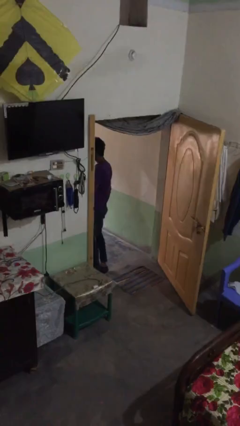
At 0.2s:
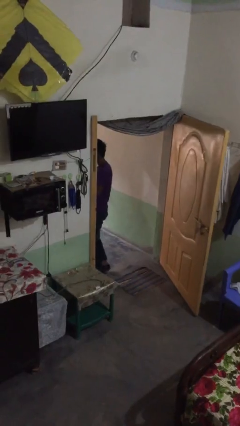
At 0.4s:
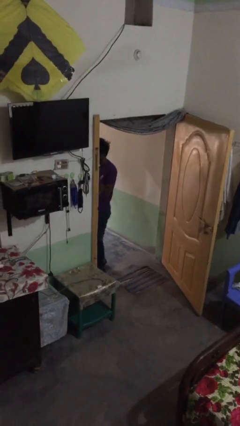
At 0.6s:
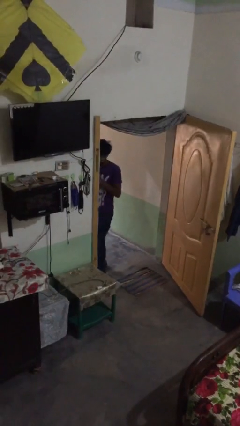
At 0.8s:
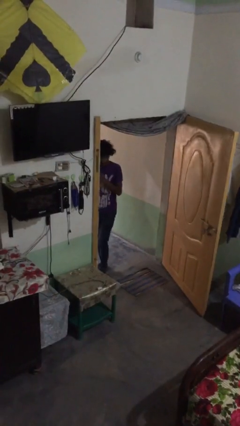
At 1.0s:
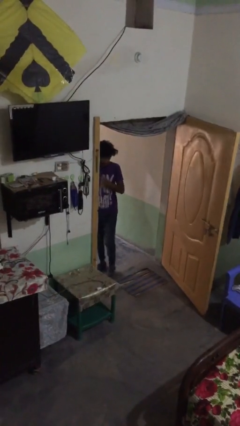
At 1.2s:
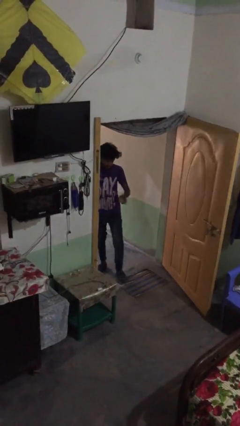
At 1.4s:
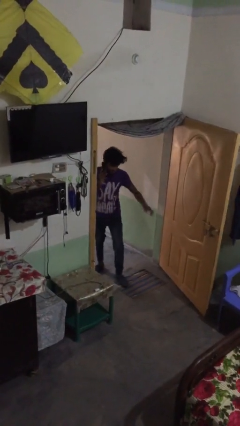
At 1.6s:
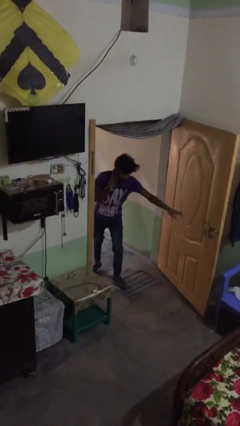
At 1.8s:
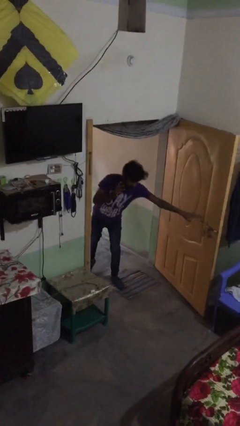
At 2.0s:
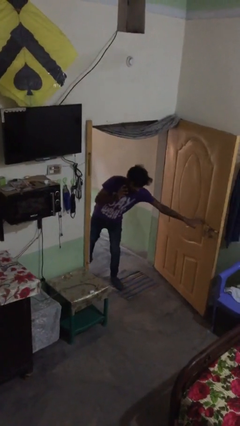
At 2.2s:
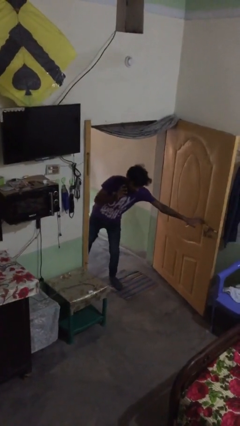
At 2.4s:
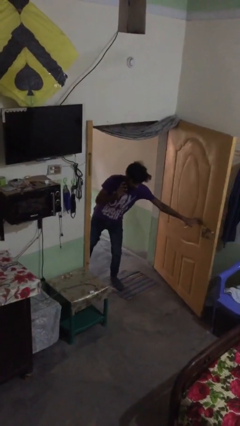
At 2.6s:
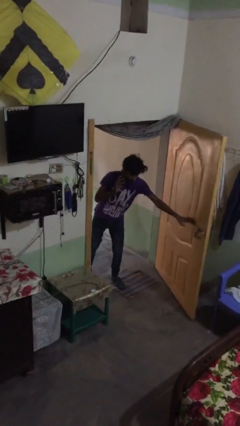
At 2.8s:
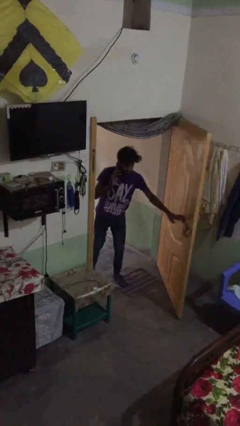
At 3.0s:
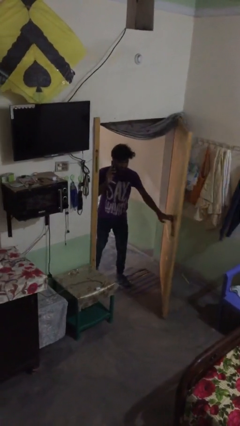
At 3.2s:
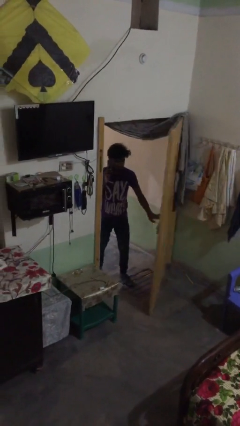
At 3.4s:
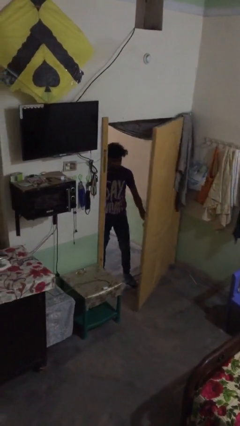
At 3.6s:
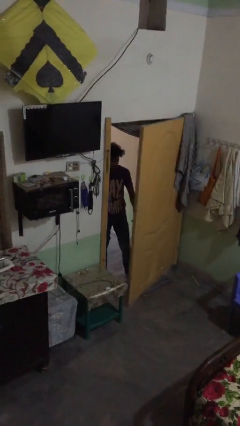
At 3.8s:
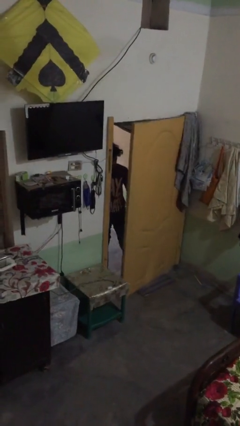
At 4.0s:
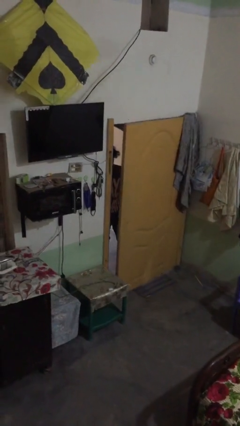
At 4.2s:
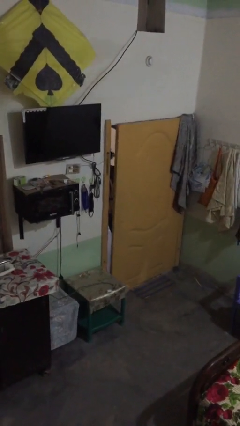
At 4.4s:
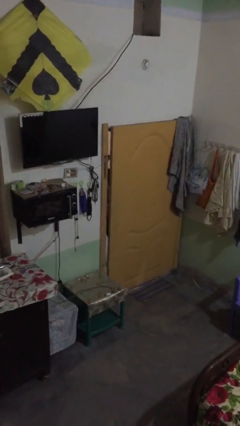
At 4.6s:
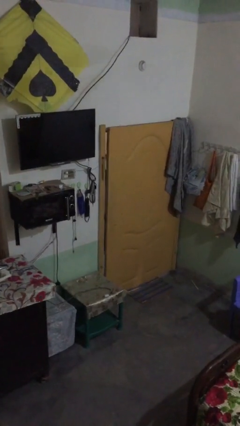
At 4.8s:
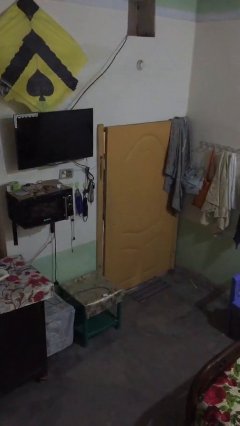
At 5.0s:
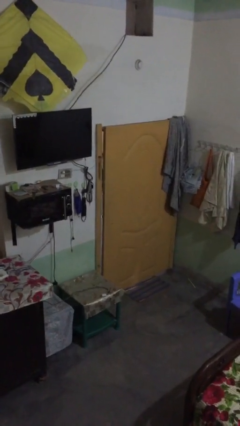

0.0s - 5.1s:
person closes facility door

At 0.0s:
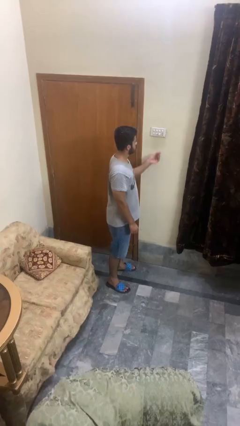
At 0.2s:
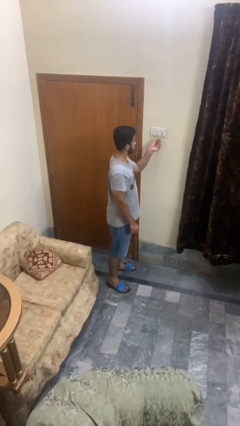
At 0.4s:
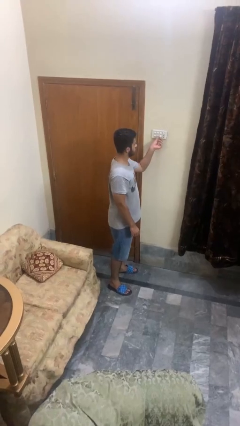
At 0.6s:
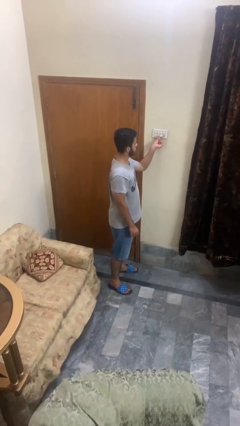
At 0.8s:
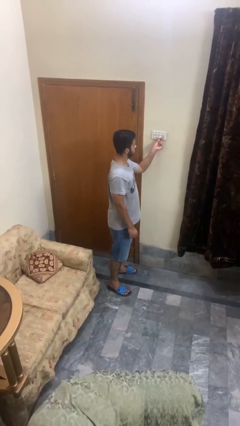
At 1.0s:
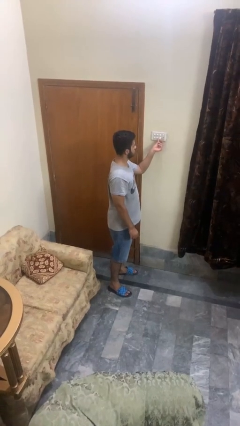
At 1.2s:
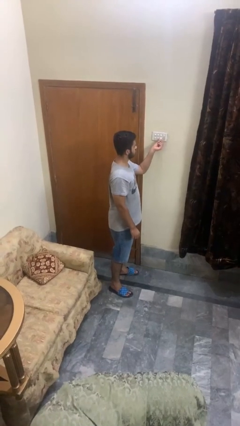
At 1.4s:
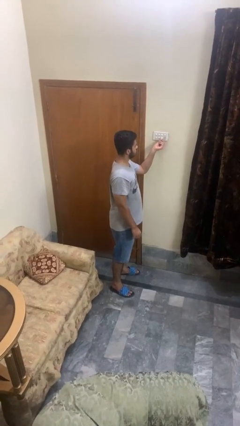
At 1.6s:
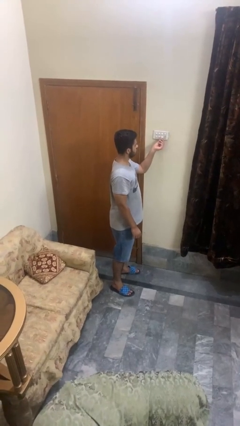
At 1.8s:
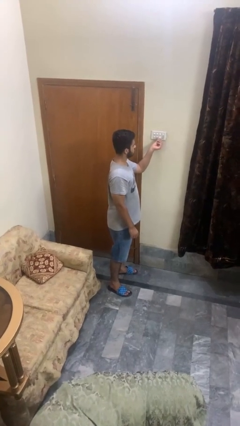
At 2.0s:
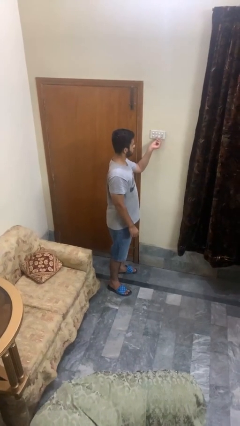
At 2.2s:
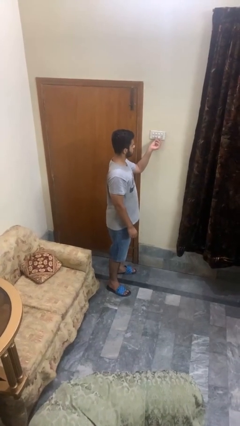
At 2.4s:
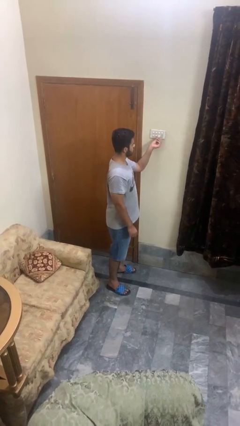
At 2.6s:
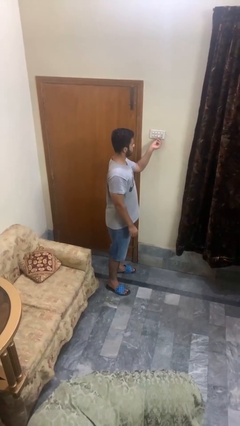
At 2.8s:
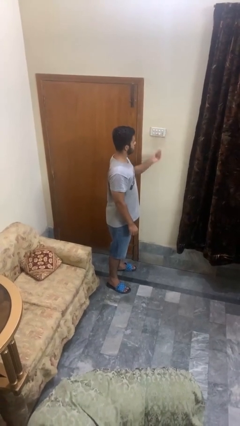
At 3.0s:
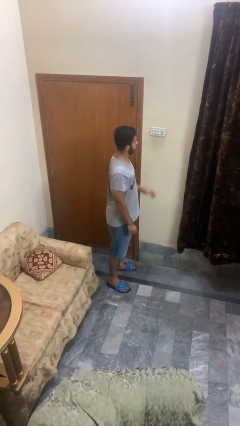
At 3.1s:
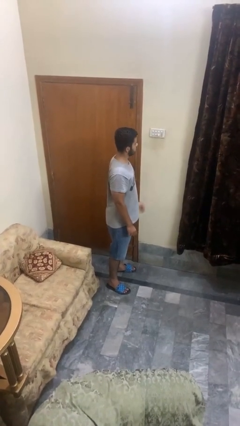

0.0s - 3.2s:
person adjusts thermostat

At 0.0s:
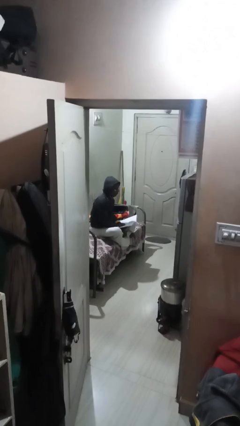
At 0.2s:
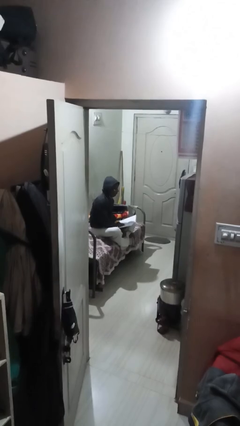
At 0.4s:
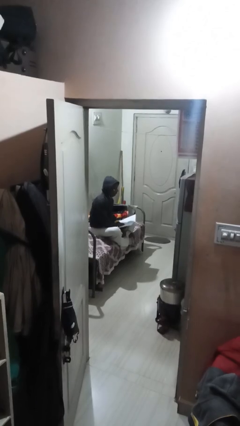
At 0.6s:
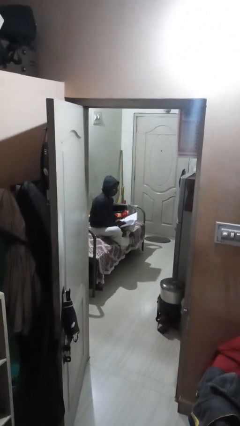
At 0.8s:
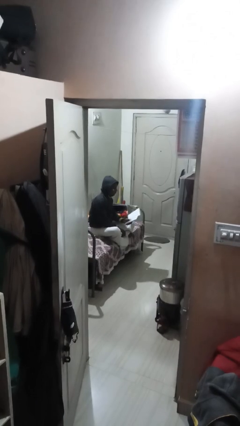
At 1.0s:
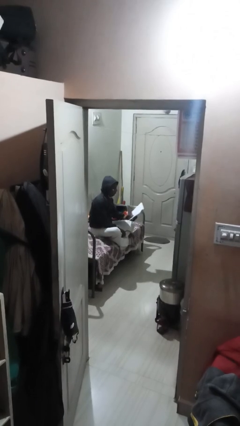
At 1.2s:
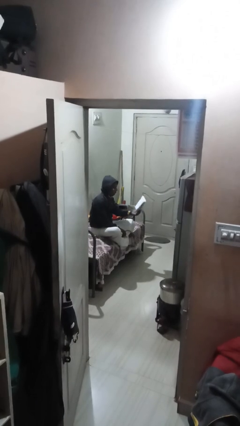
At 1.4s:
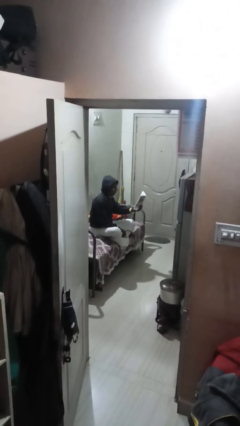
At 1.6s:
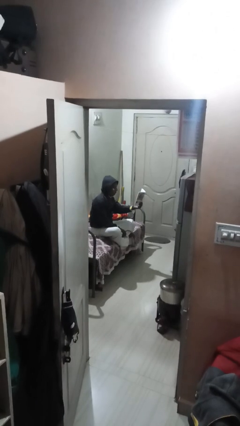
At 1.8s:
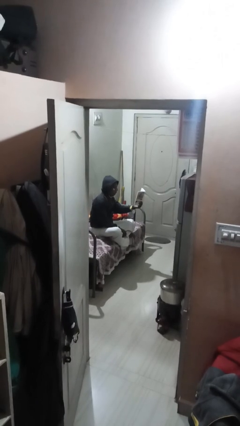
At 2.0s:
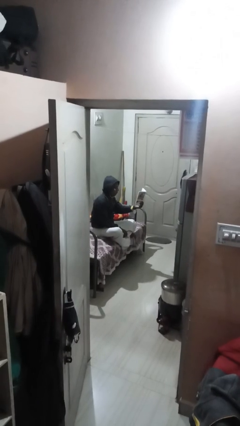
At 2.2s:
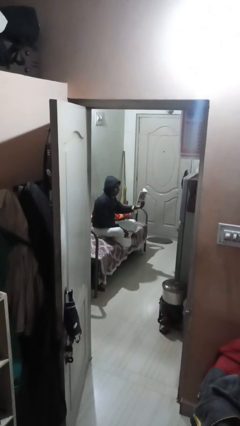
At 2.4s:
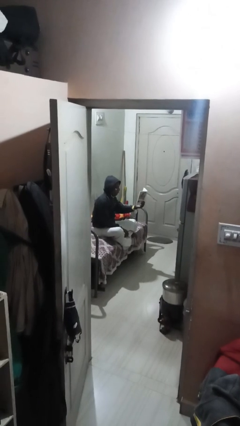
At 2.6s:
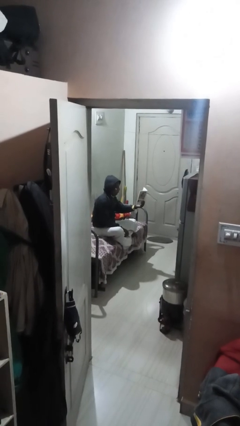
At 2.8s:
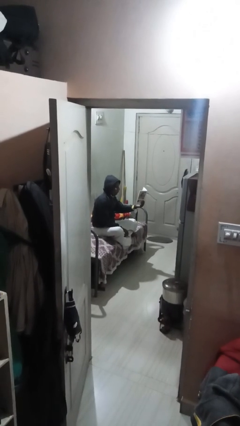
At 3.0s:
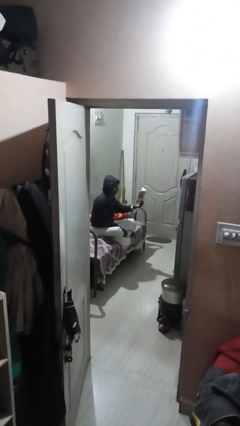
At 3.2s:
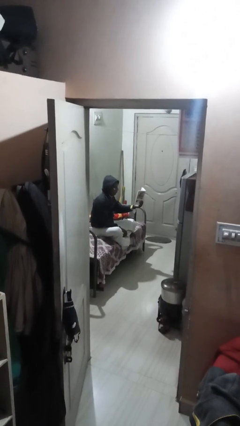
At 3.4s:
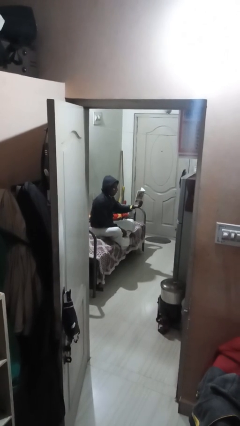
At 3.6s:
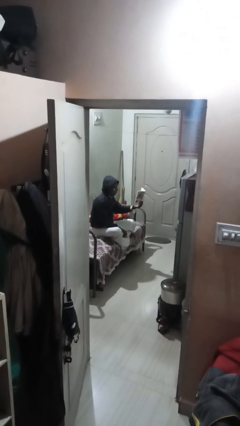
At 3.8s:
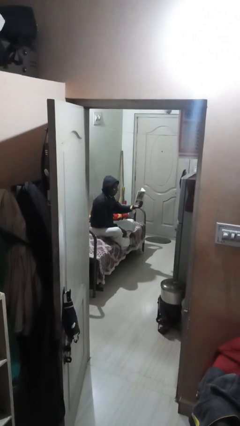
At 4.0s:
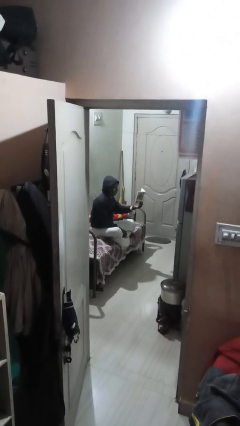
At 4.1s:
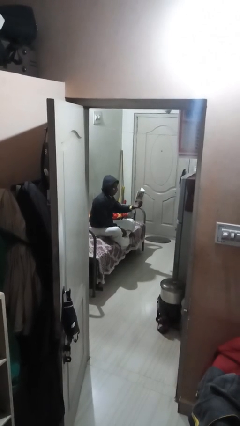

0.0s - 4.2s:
person reads document

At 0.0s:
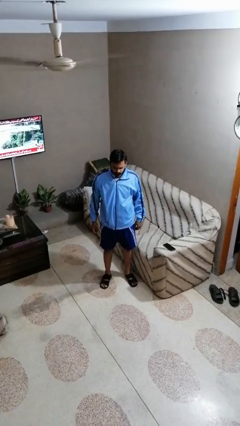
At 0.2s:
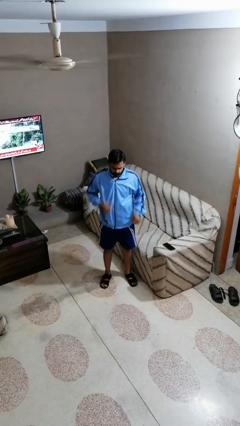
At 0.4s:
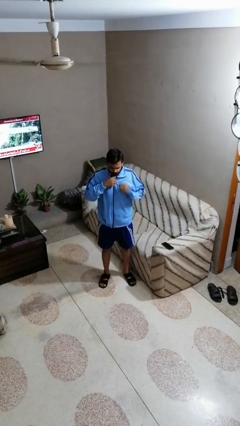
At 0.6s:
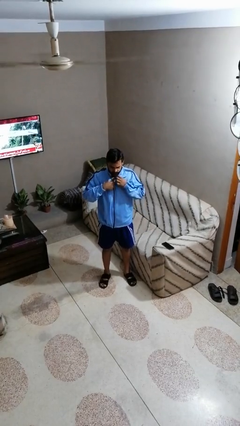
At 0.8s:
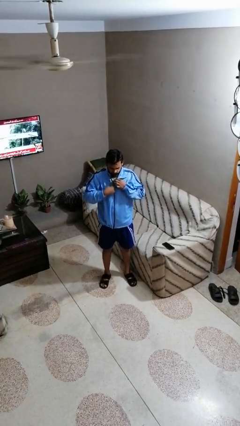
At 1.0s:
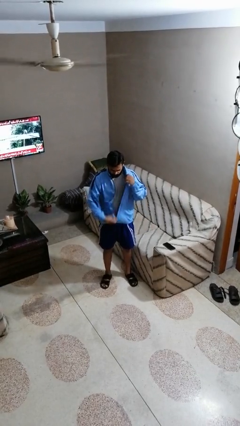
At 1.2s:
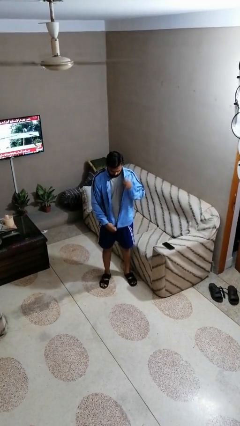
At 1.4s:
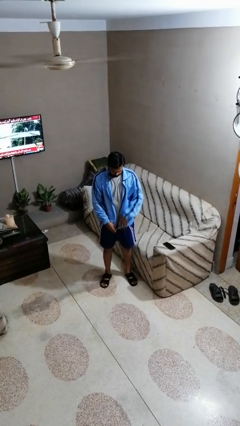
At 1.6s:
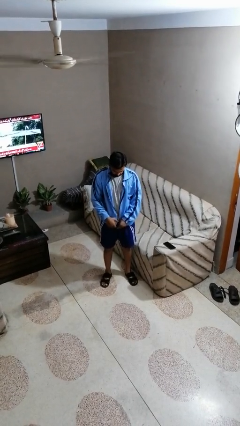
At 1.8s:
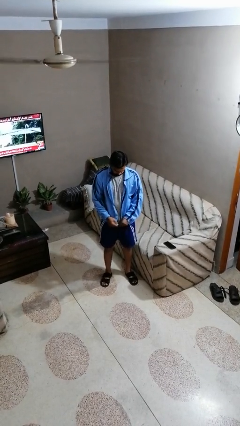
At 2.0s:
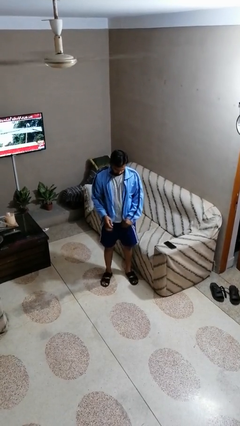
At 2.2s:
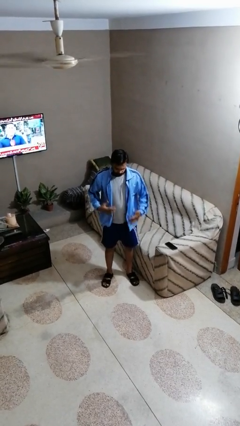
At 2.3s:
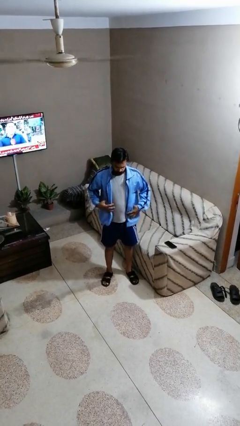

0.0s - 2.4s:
person unzips jacket

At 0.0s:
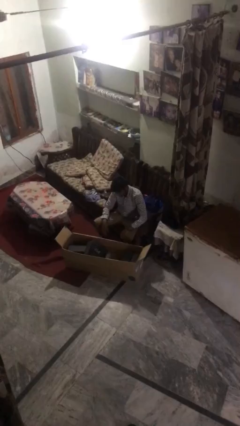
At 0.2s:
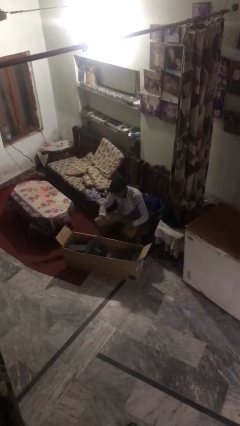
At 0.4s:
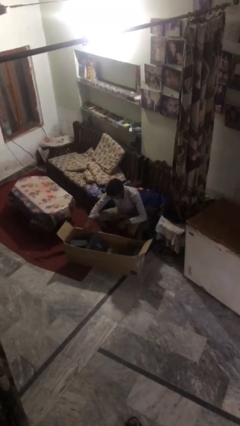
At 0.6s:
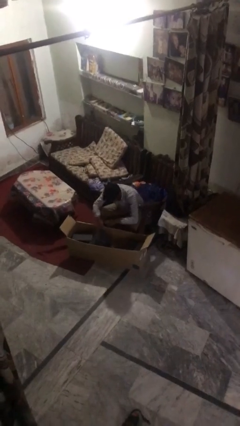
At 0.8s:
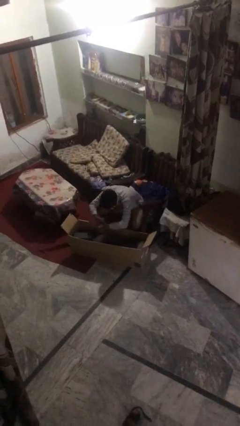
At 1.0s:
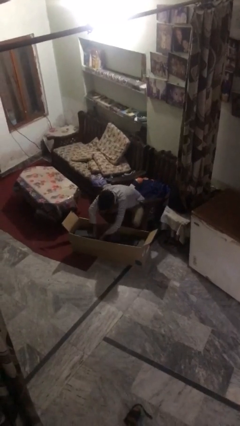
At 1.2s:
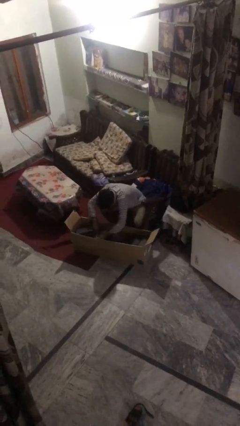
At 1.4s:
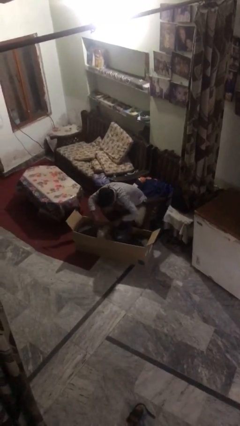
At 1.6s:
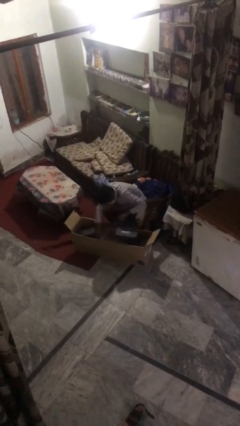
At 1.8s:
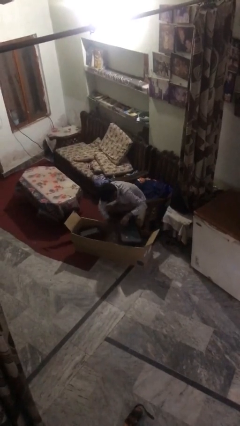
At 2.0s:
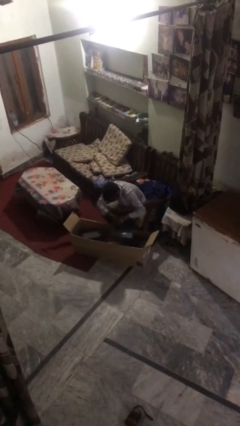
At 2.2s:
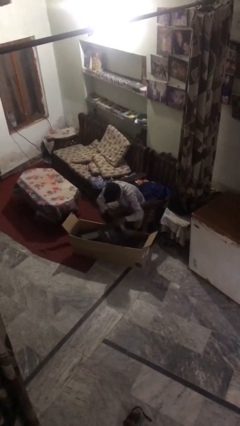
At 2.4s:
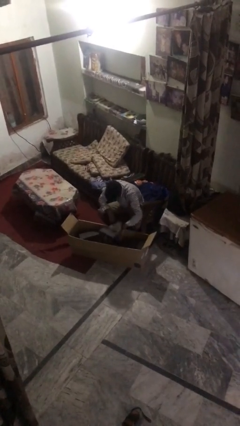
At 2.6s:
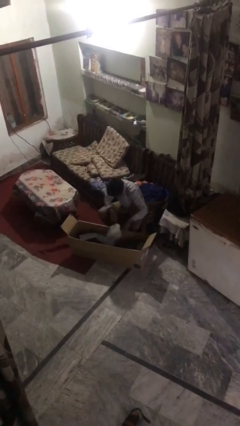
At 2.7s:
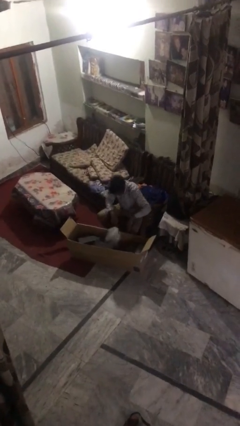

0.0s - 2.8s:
person searches in box
